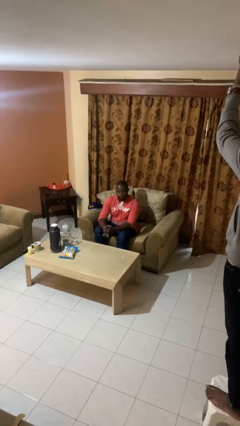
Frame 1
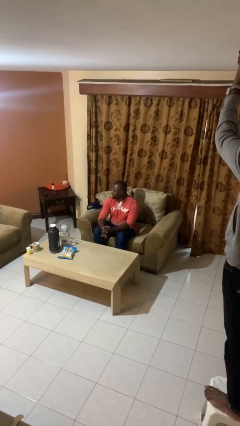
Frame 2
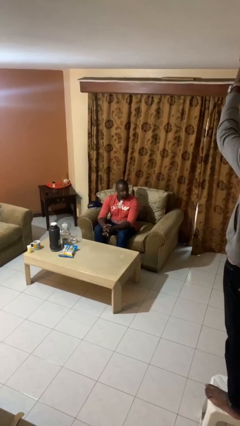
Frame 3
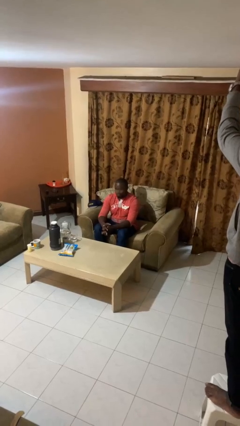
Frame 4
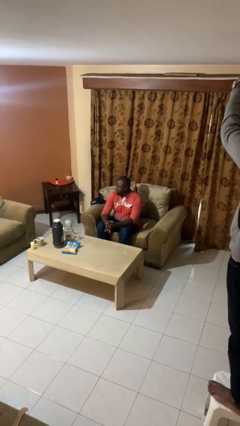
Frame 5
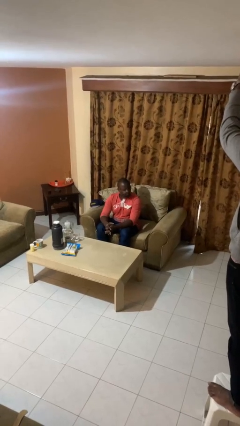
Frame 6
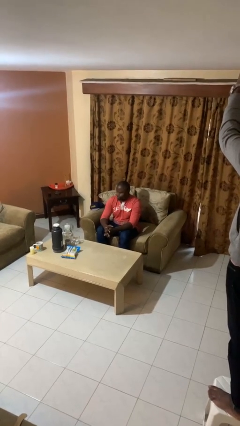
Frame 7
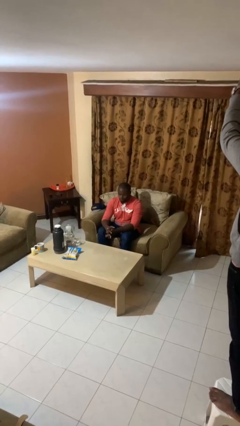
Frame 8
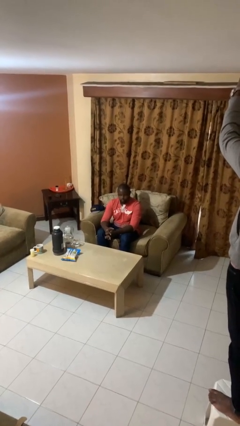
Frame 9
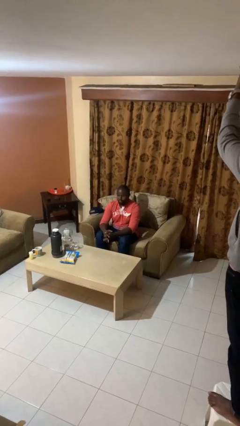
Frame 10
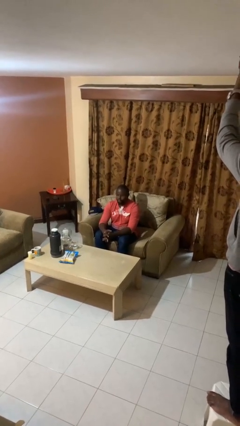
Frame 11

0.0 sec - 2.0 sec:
person shakes head

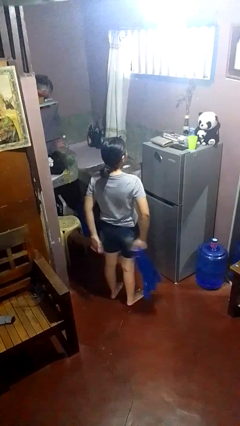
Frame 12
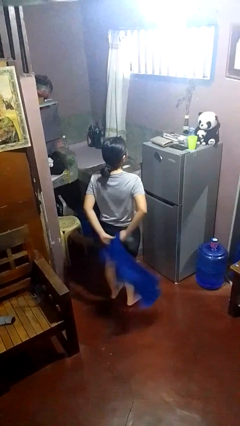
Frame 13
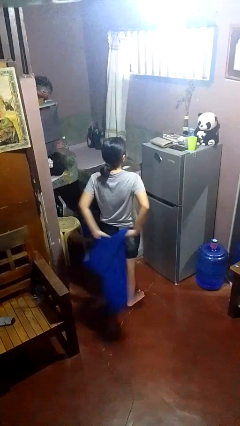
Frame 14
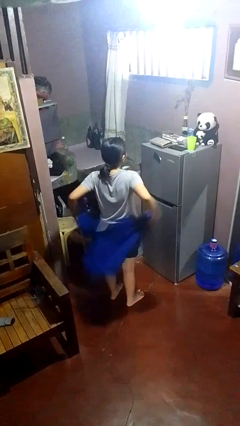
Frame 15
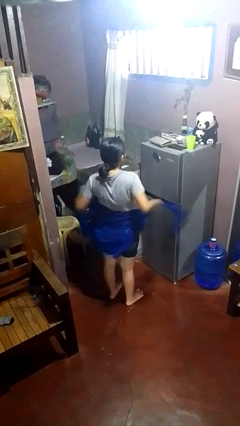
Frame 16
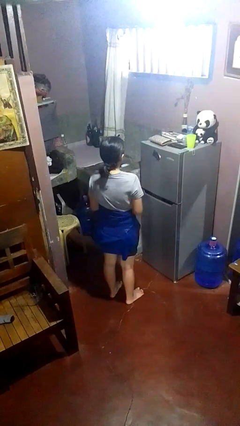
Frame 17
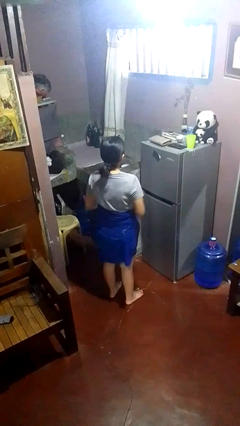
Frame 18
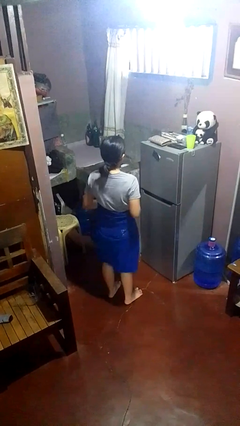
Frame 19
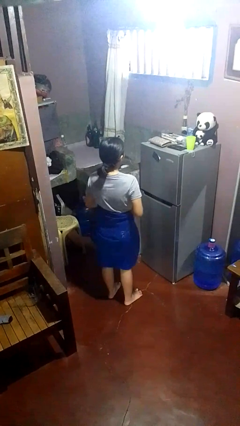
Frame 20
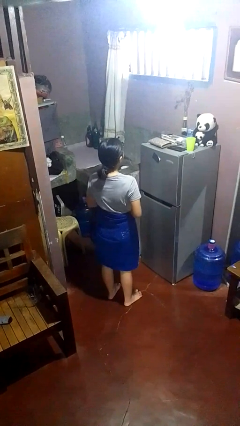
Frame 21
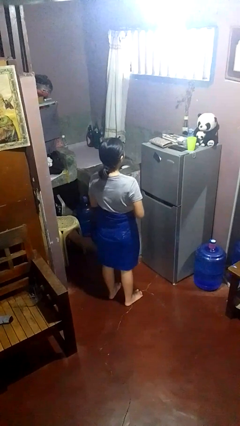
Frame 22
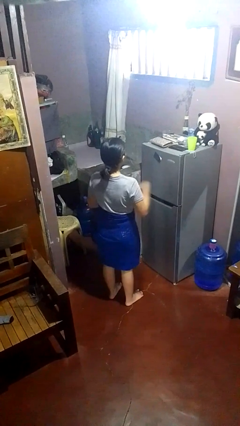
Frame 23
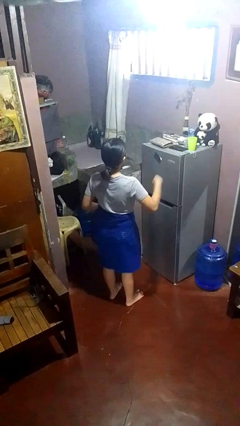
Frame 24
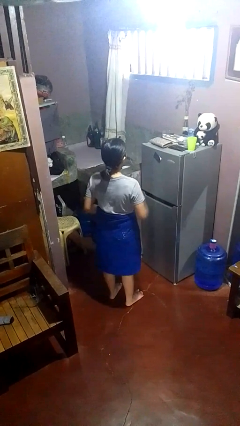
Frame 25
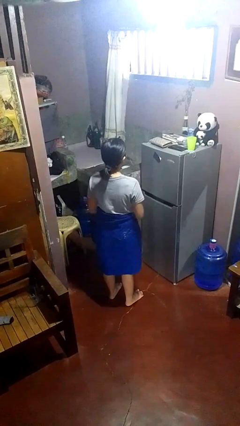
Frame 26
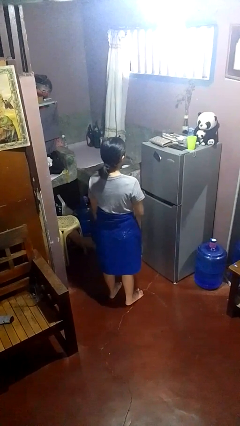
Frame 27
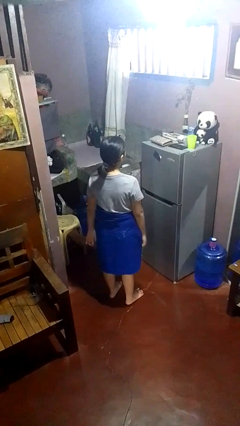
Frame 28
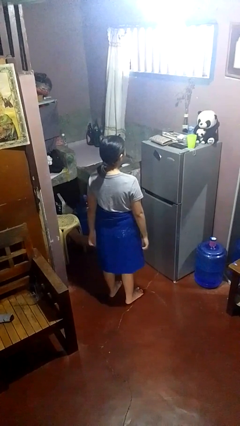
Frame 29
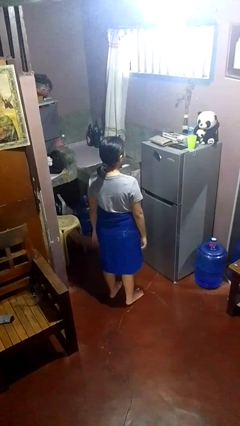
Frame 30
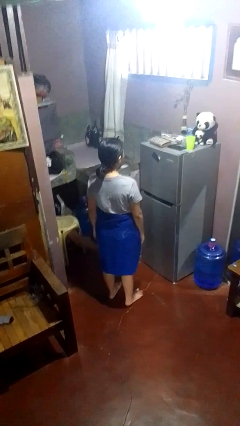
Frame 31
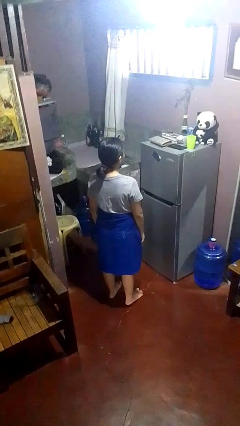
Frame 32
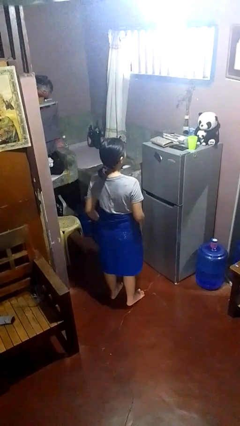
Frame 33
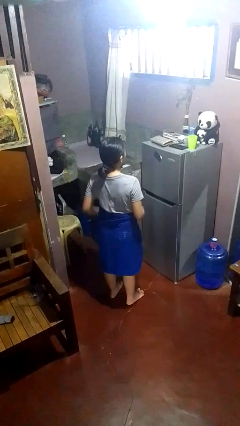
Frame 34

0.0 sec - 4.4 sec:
person ties jacket around waist

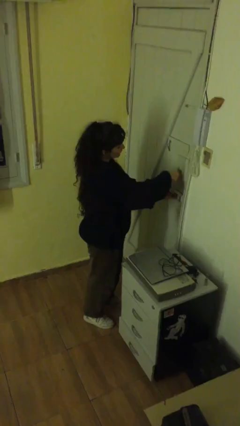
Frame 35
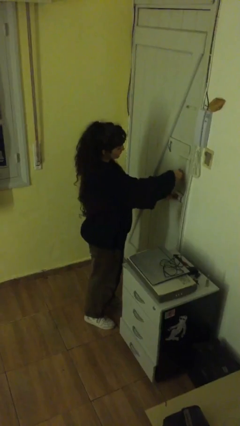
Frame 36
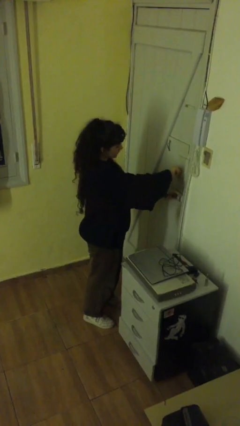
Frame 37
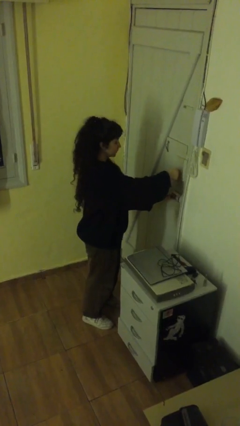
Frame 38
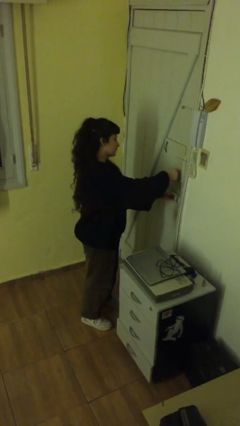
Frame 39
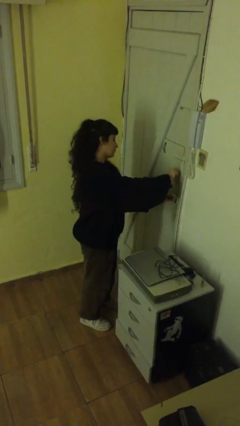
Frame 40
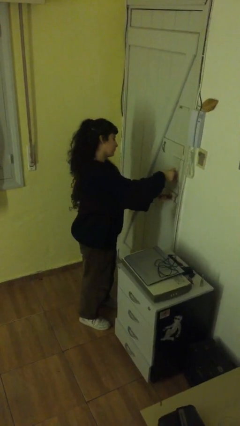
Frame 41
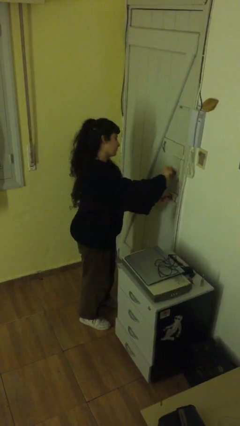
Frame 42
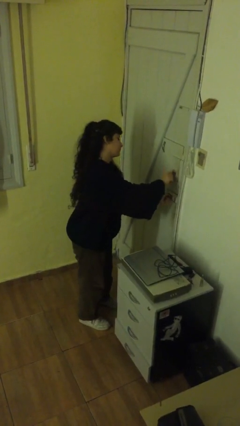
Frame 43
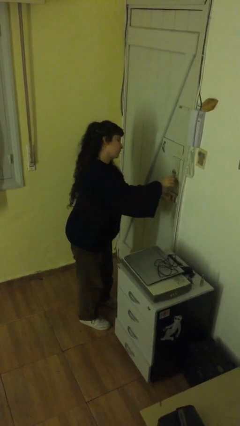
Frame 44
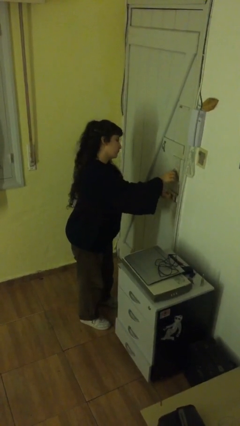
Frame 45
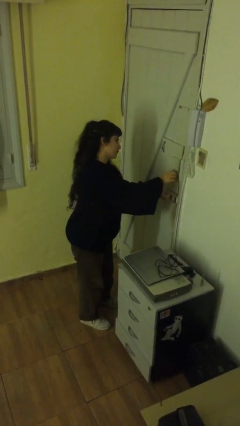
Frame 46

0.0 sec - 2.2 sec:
person unlocks door with keys

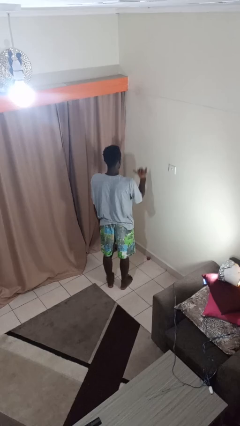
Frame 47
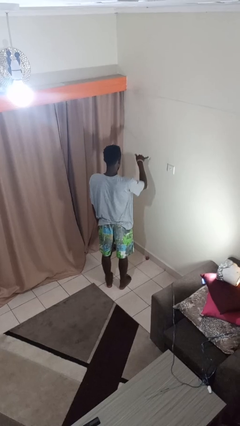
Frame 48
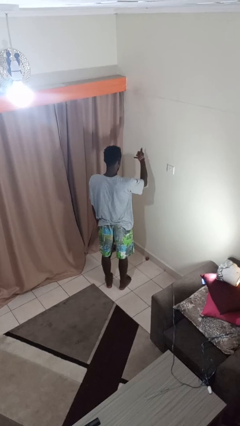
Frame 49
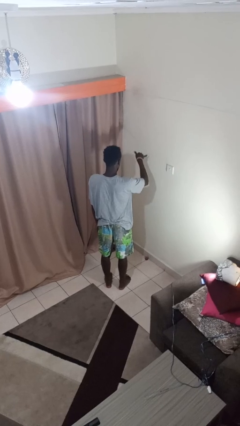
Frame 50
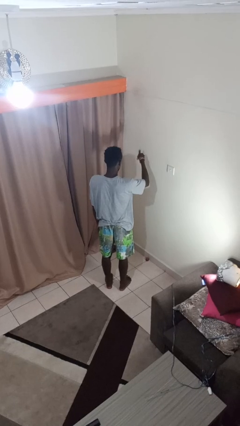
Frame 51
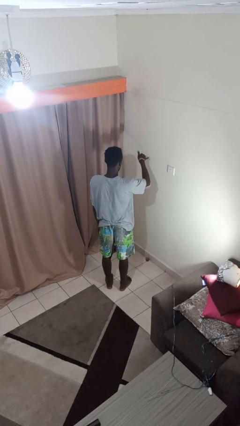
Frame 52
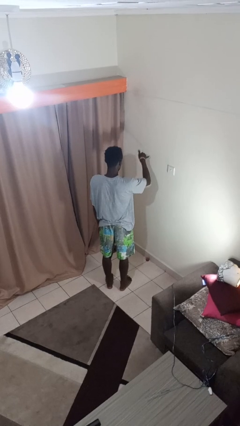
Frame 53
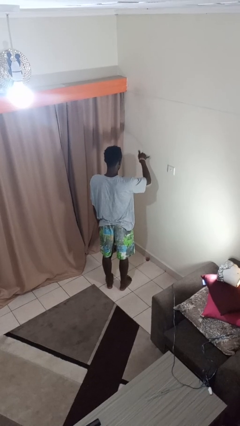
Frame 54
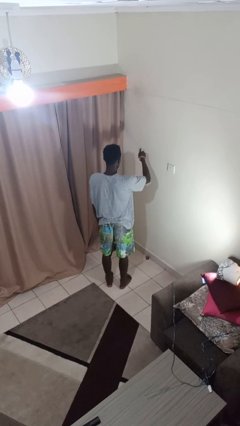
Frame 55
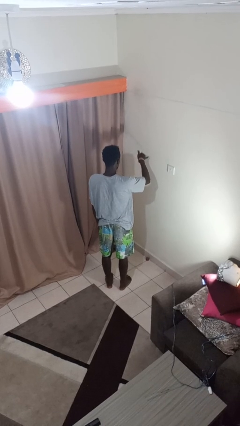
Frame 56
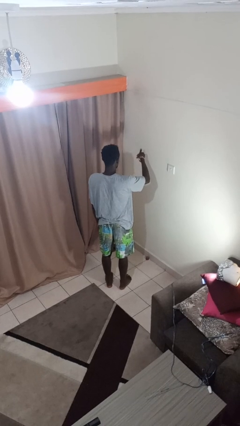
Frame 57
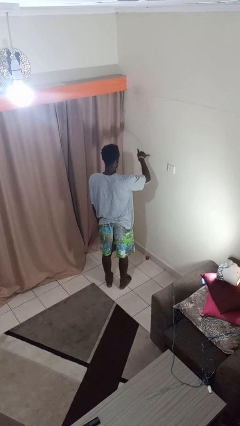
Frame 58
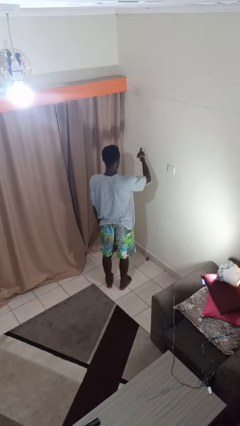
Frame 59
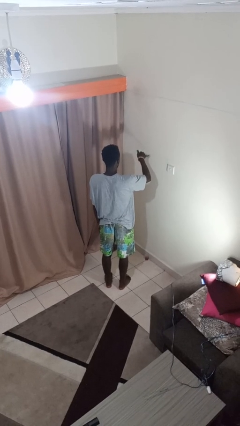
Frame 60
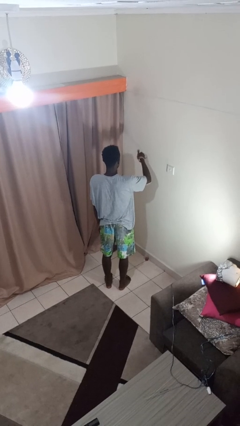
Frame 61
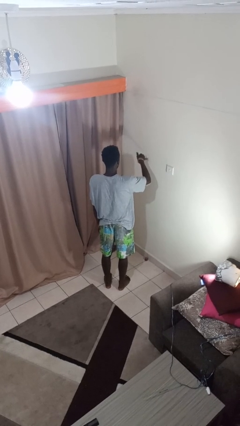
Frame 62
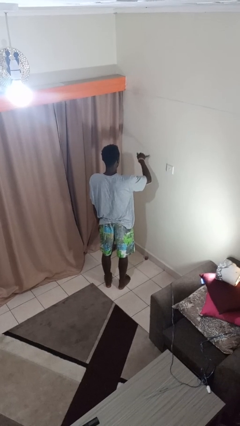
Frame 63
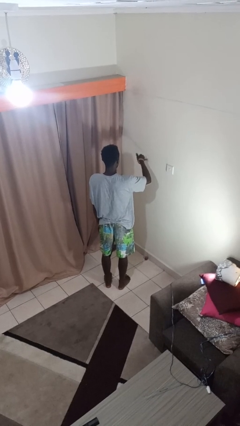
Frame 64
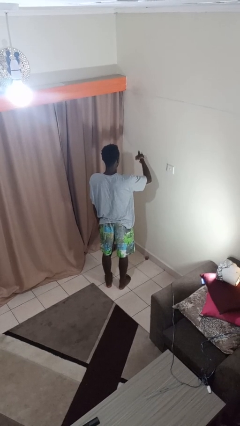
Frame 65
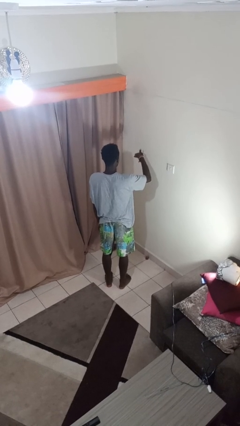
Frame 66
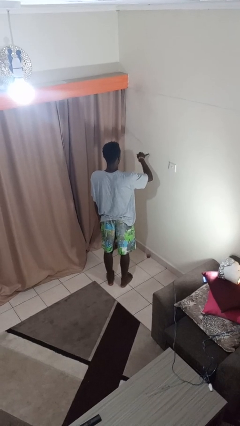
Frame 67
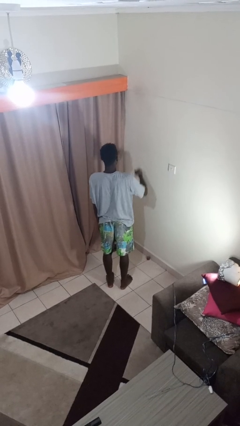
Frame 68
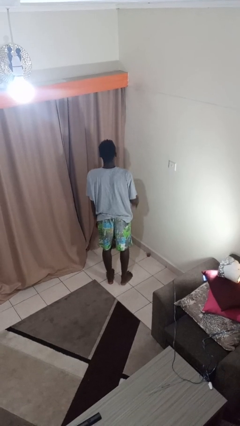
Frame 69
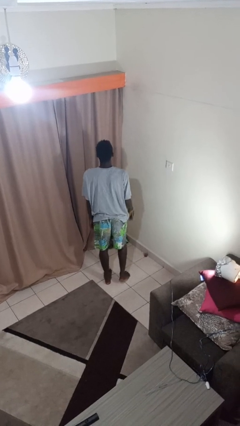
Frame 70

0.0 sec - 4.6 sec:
person gestures hang loose

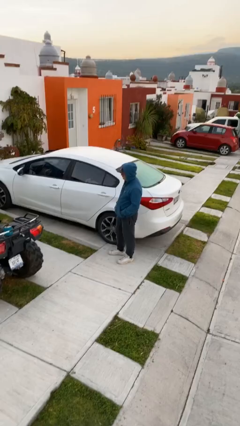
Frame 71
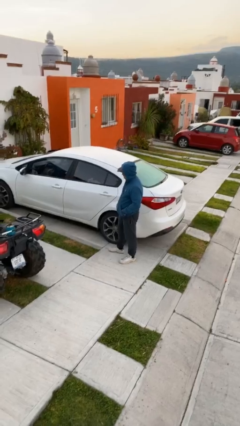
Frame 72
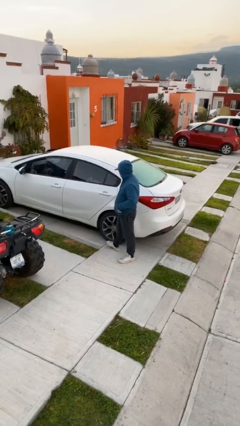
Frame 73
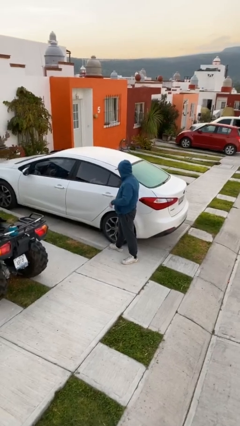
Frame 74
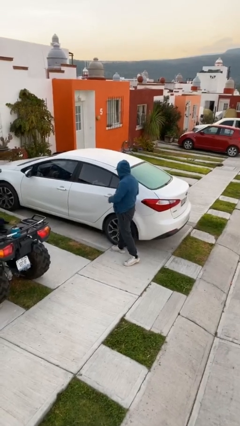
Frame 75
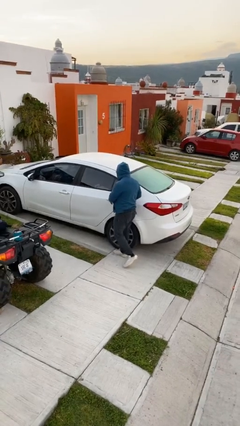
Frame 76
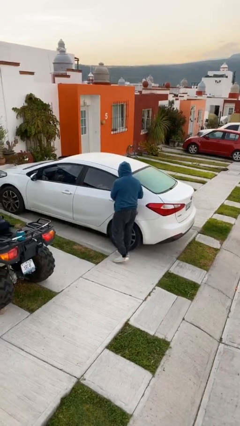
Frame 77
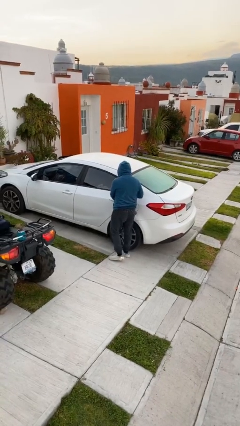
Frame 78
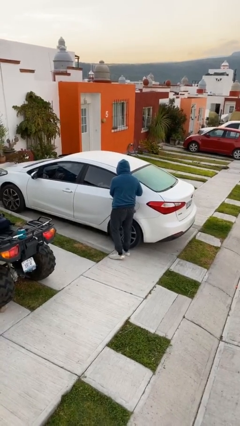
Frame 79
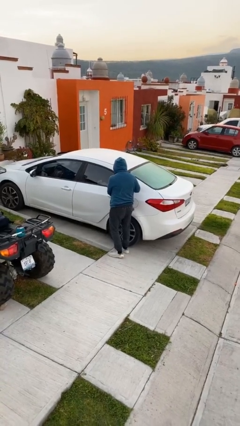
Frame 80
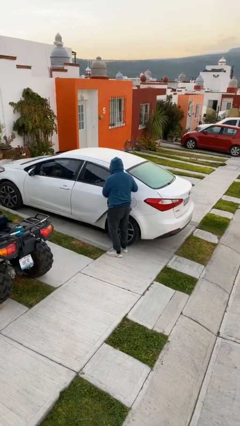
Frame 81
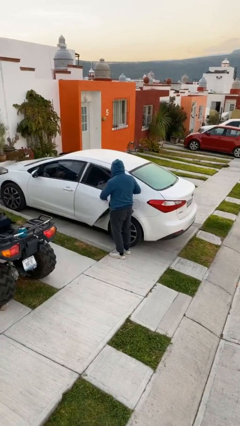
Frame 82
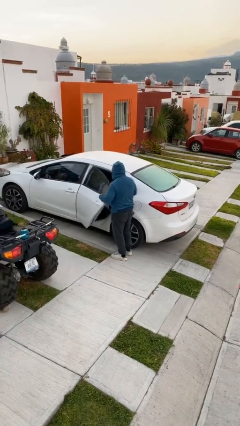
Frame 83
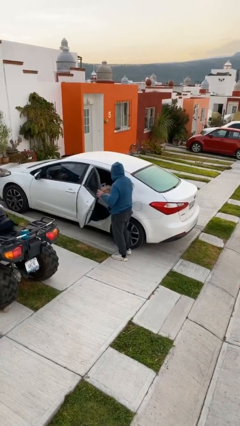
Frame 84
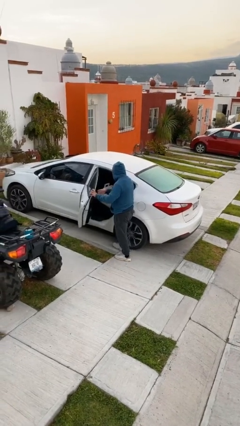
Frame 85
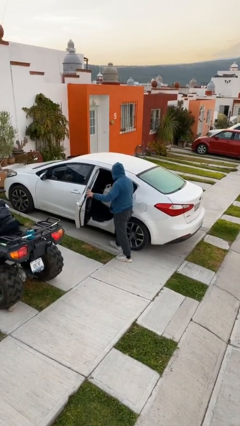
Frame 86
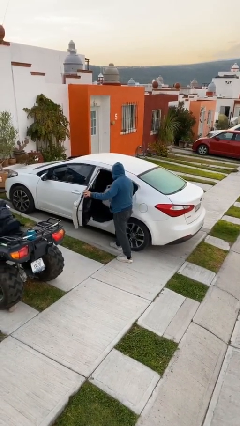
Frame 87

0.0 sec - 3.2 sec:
person opens car door

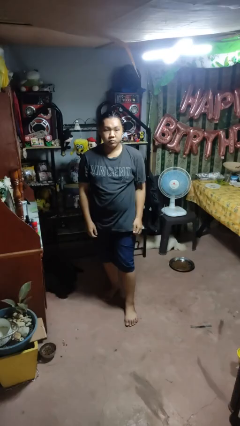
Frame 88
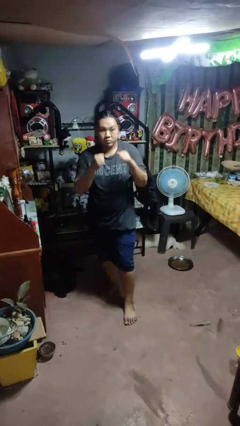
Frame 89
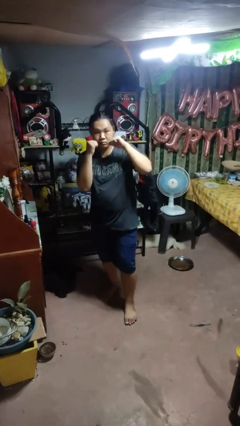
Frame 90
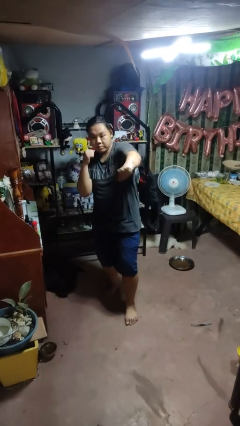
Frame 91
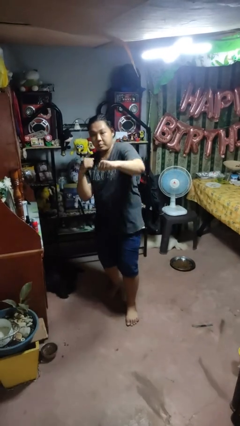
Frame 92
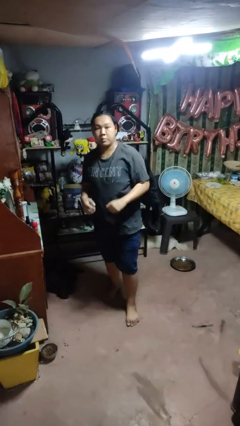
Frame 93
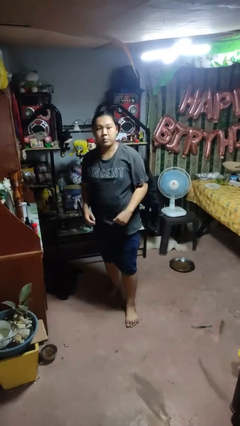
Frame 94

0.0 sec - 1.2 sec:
person punches
